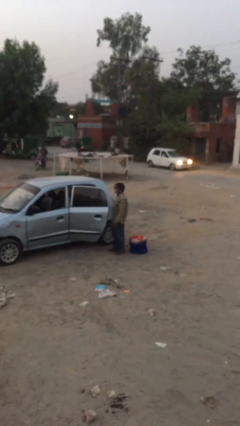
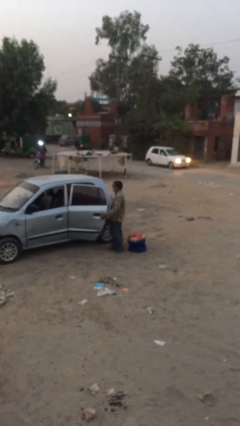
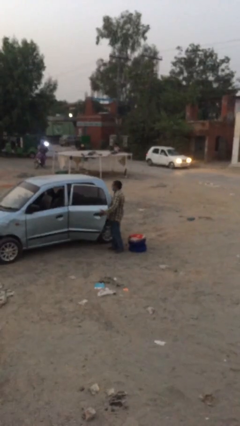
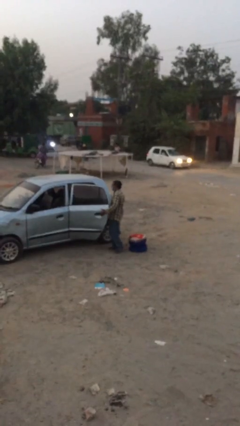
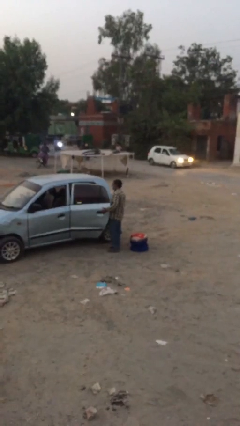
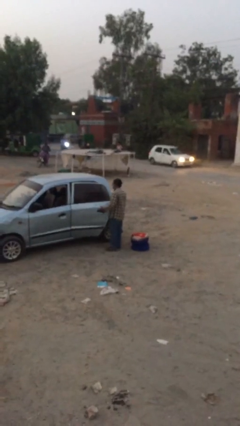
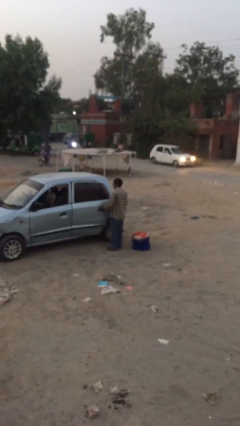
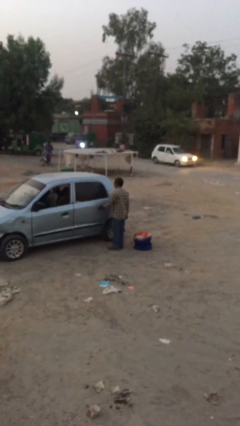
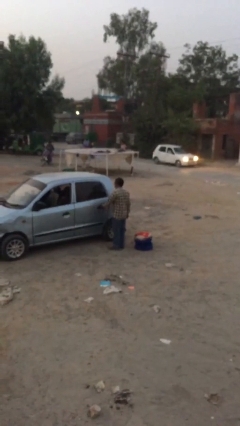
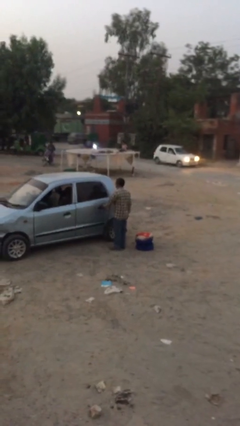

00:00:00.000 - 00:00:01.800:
person closes car door

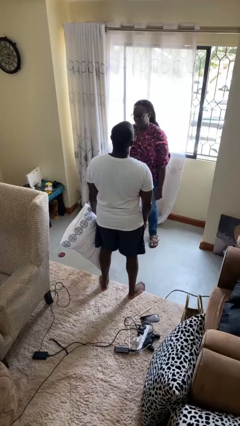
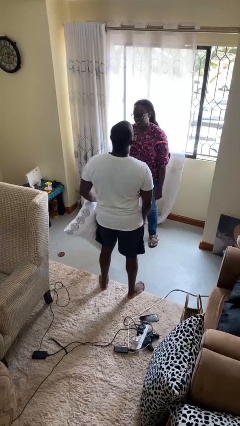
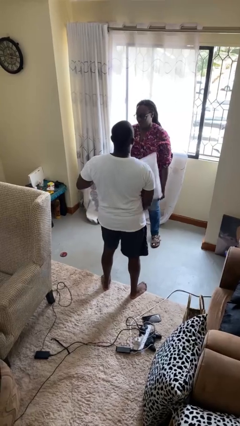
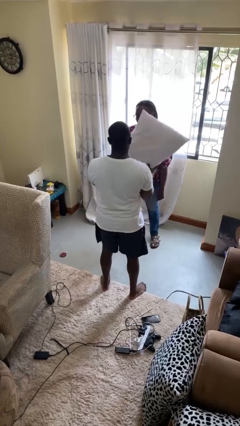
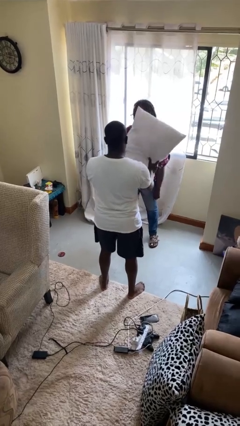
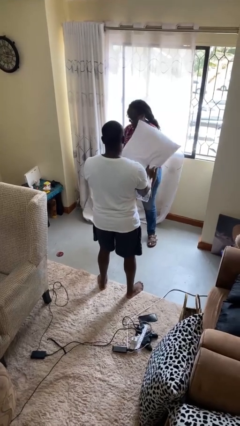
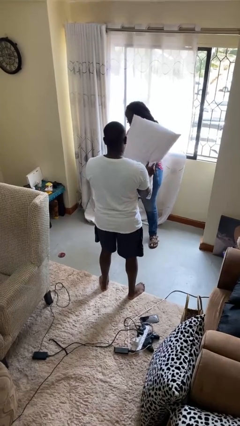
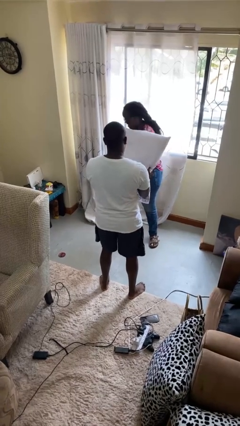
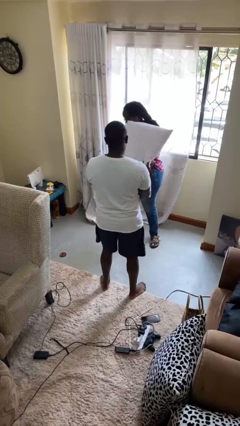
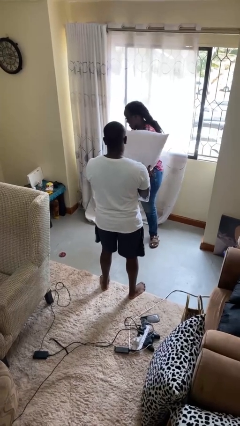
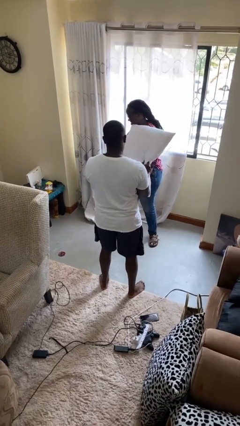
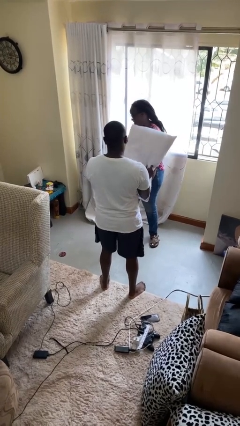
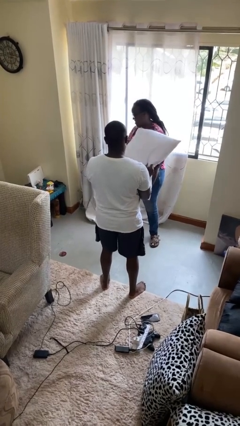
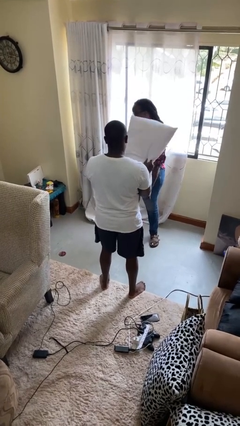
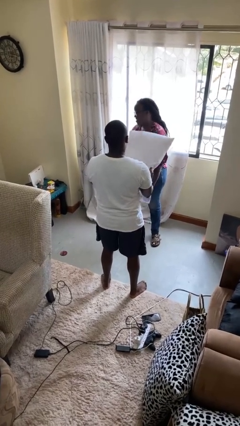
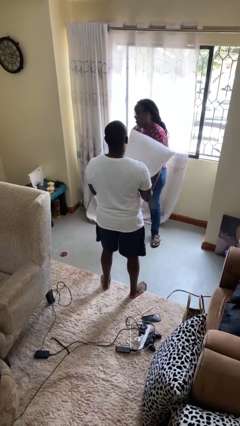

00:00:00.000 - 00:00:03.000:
person hits person with pillow

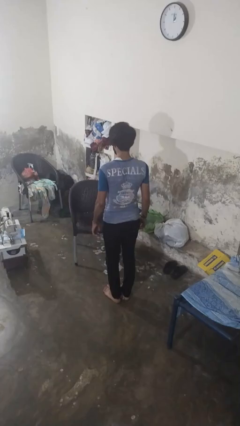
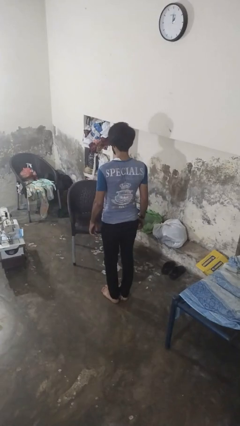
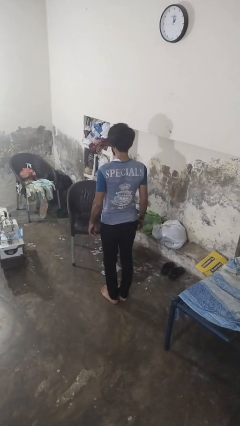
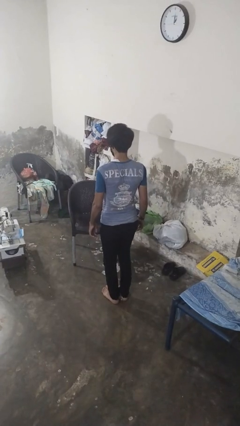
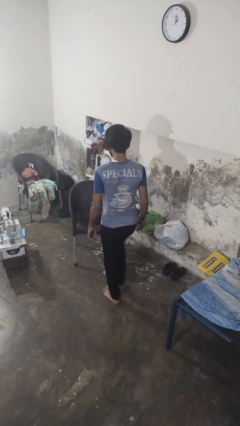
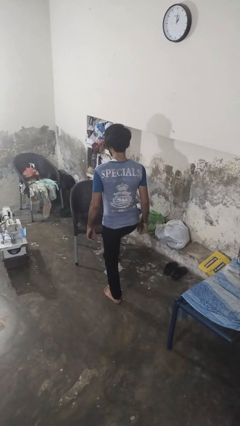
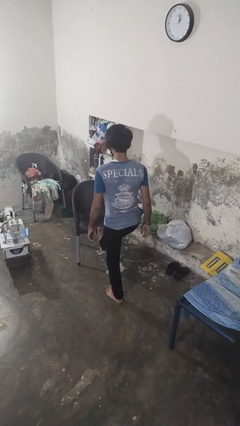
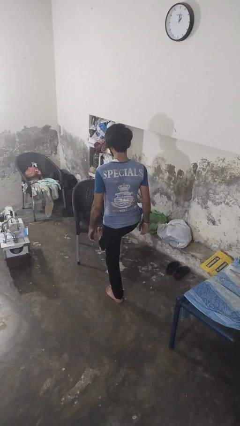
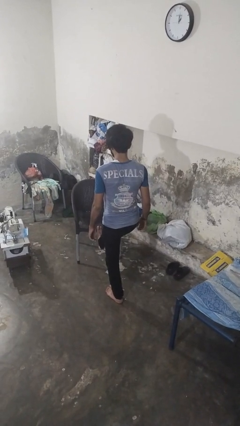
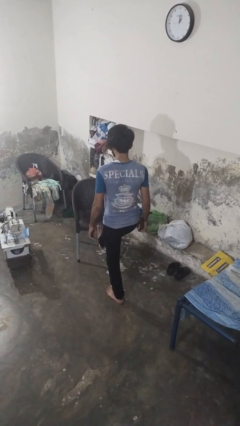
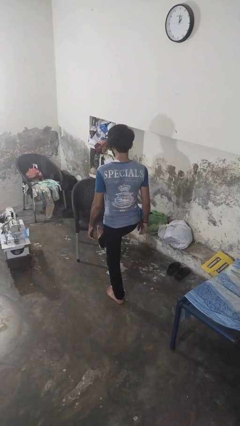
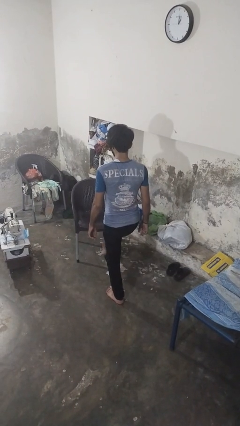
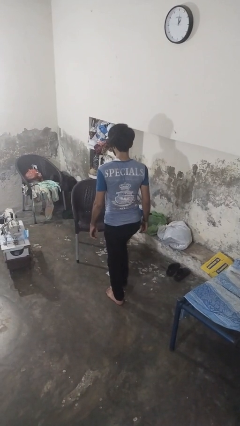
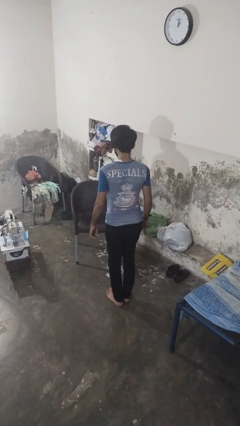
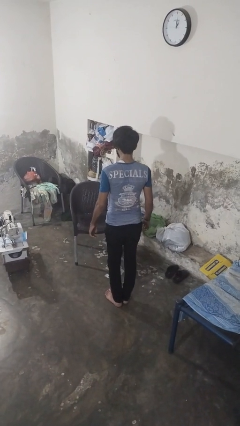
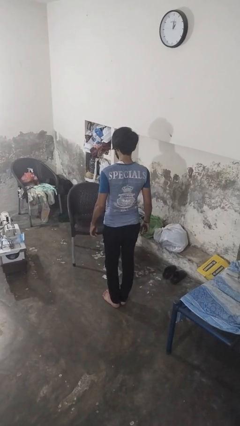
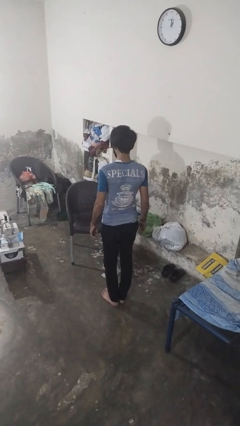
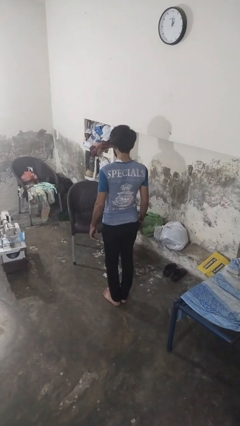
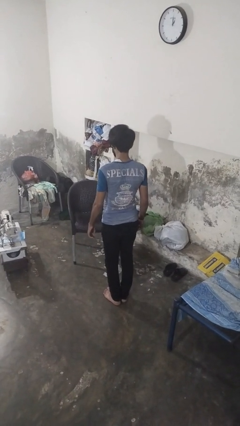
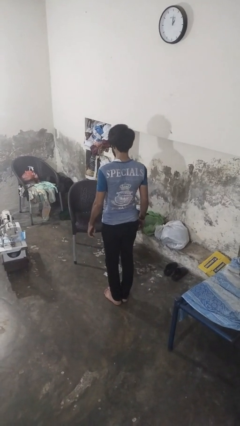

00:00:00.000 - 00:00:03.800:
person stubs toe

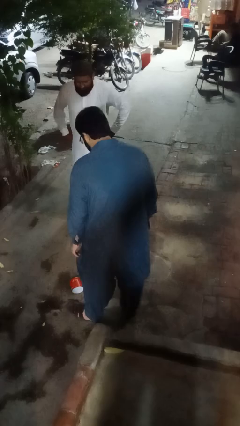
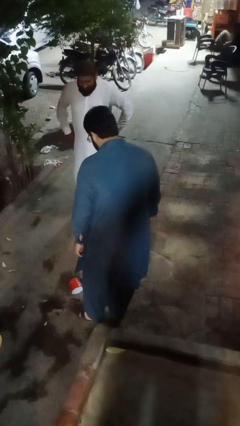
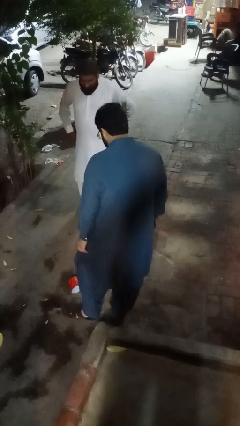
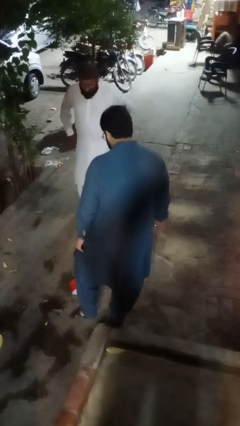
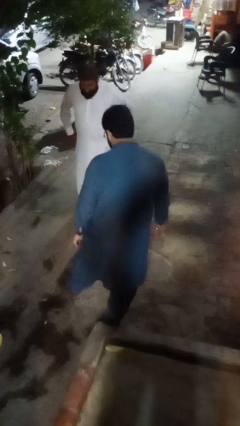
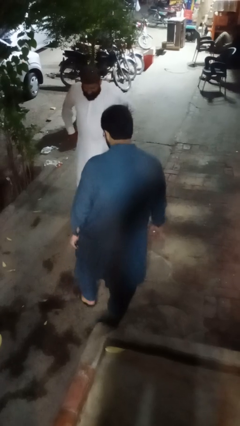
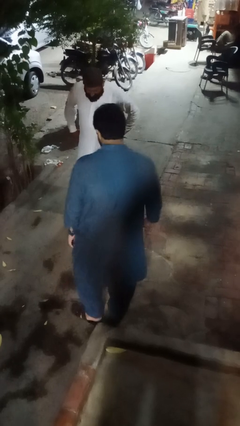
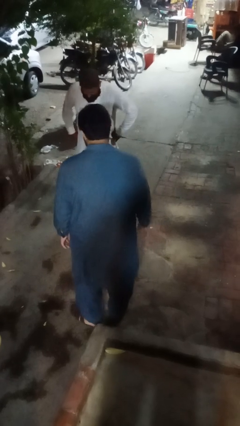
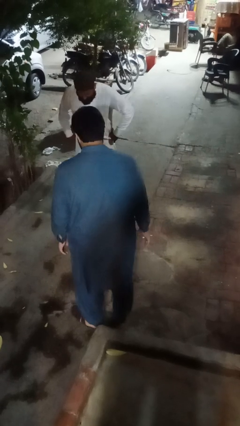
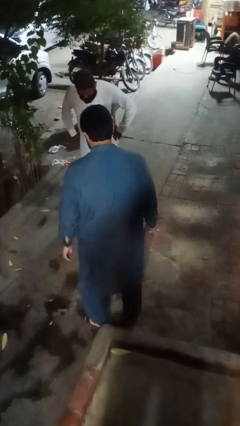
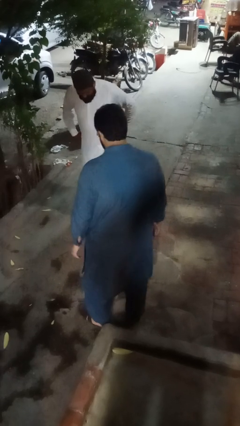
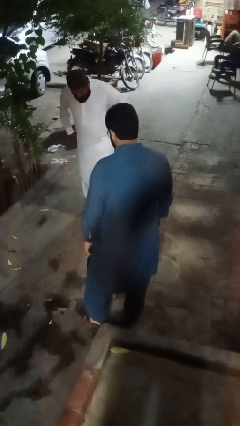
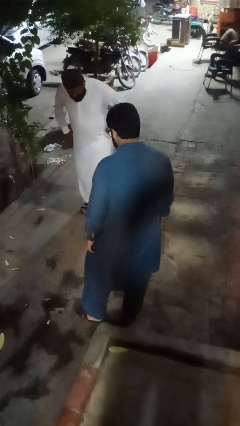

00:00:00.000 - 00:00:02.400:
person kicks object to person

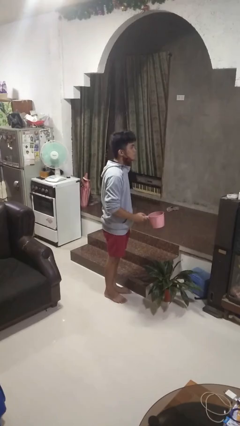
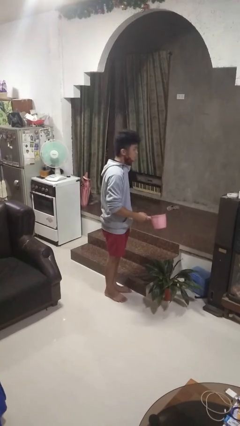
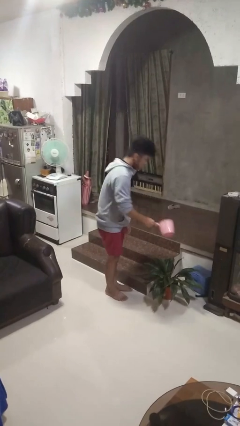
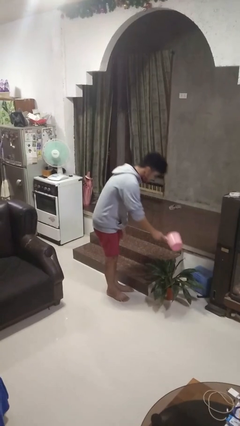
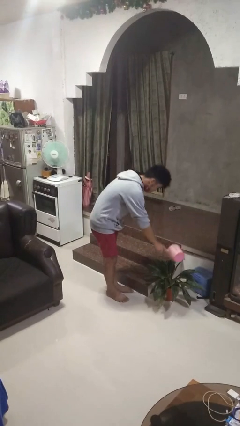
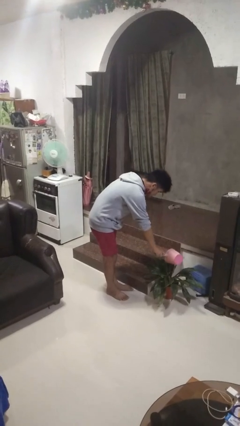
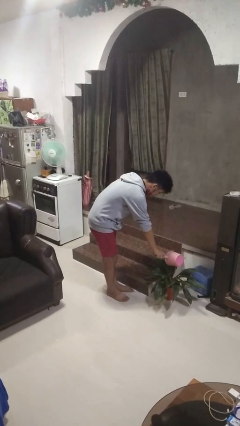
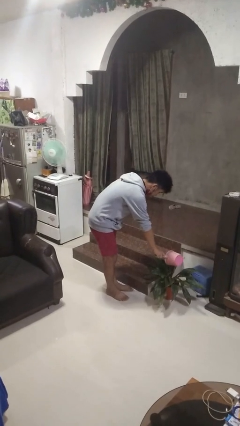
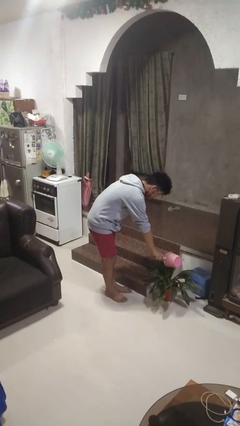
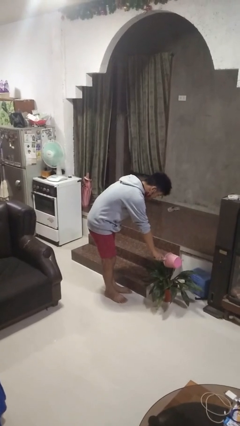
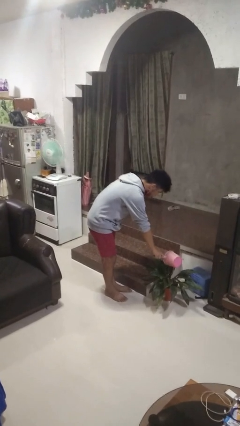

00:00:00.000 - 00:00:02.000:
person waters houseplant

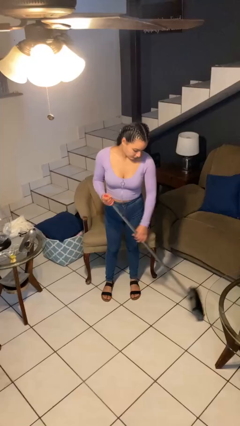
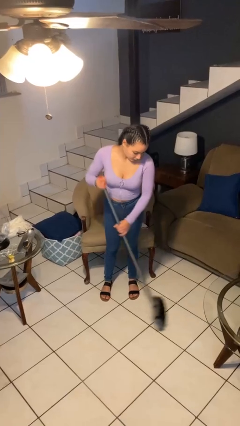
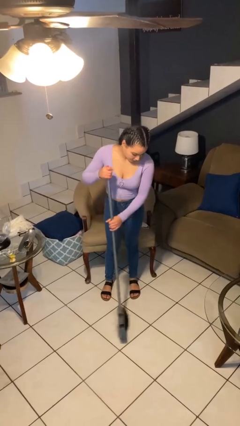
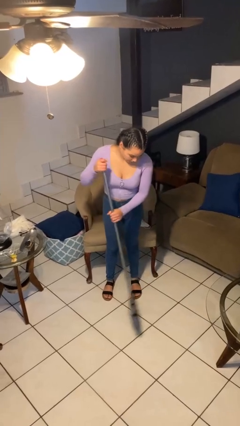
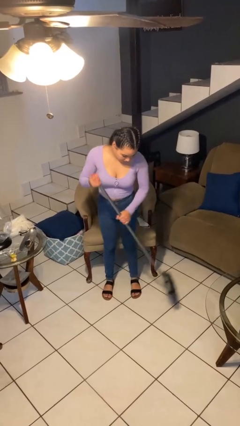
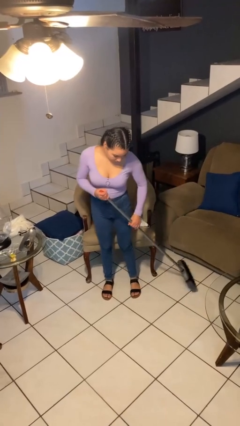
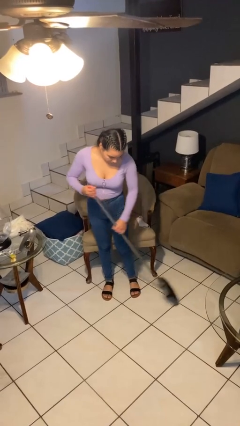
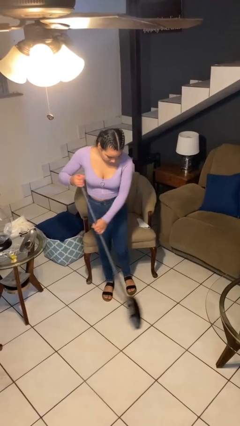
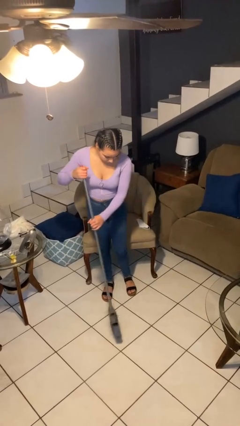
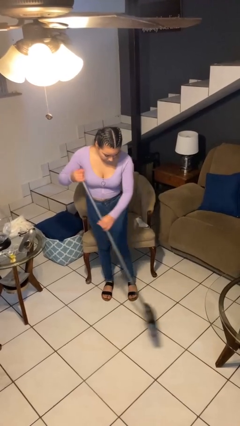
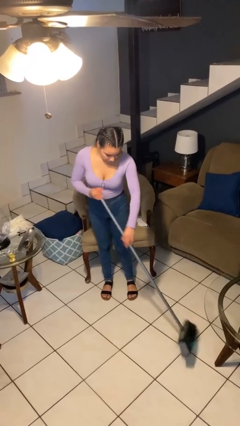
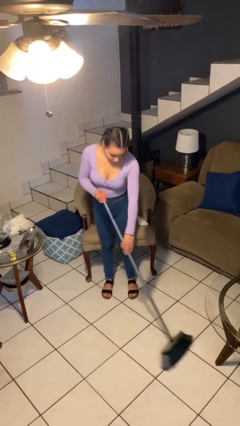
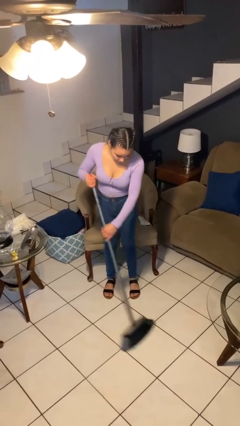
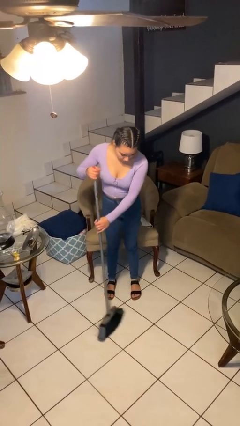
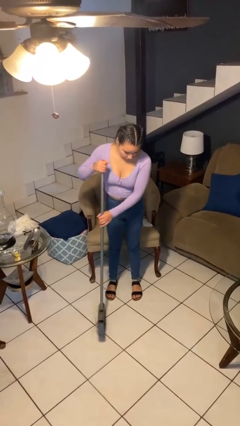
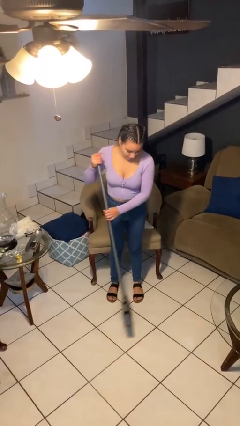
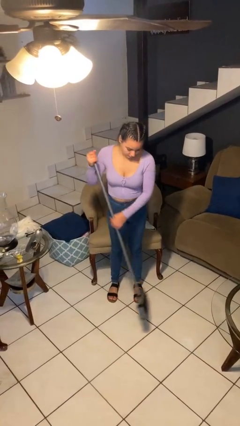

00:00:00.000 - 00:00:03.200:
person sweeps floor

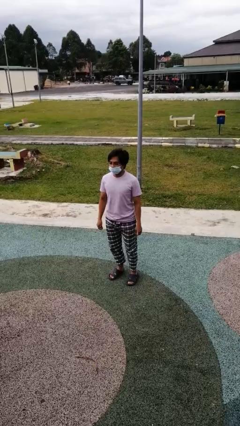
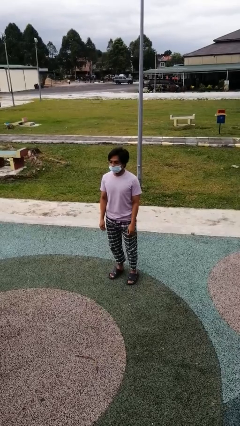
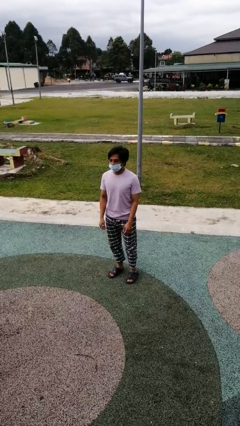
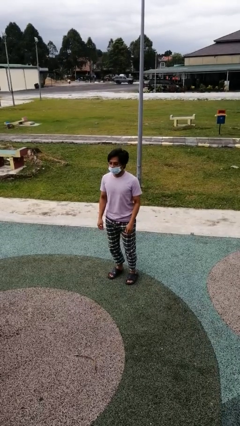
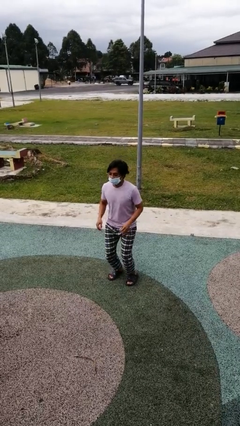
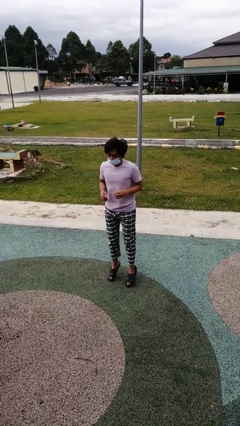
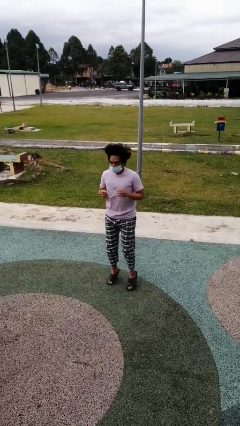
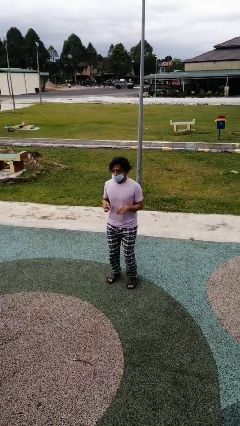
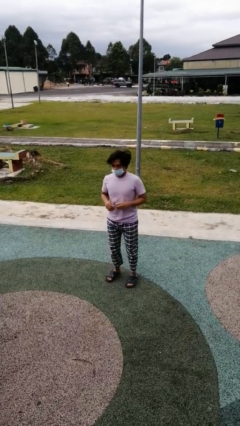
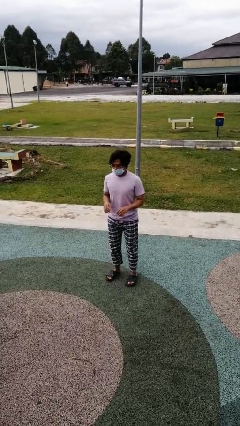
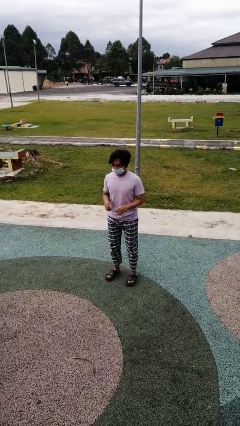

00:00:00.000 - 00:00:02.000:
person jumps
